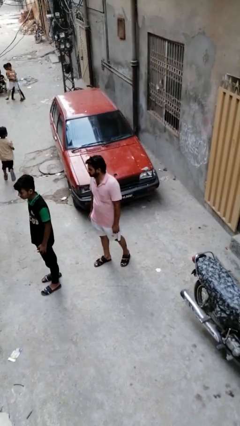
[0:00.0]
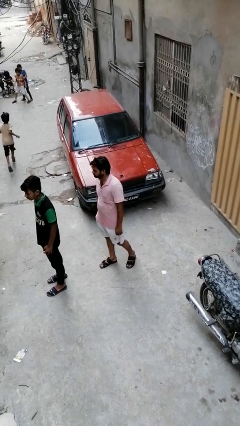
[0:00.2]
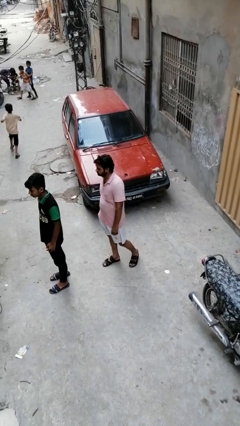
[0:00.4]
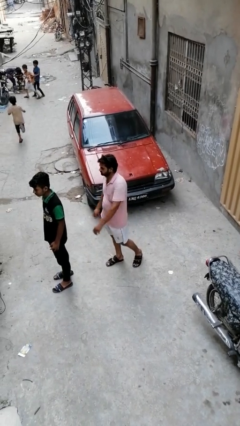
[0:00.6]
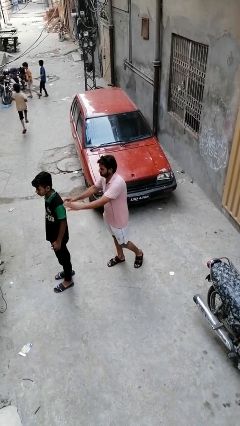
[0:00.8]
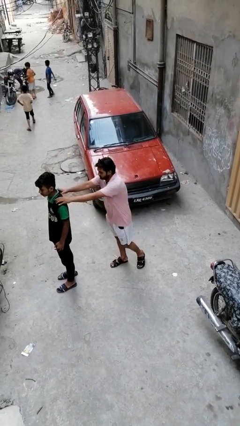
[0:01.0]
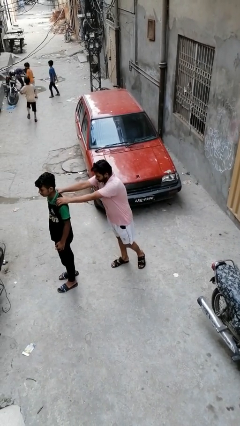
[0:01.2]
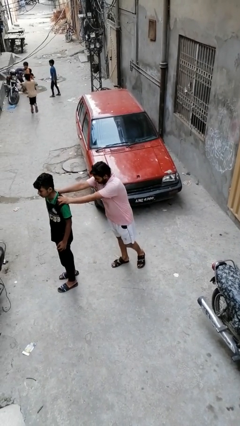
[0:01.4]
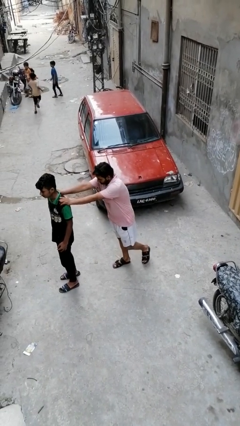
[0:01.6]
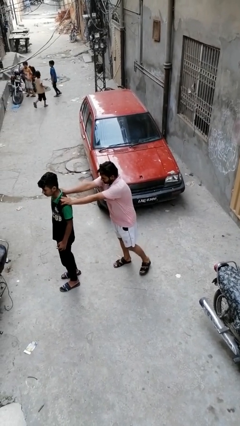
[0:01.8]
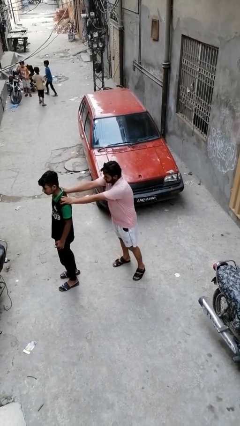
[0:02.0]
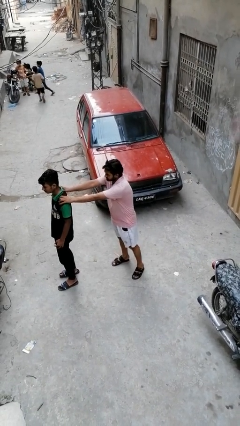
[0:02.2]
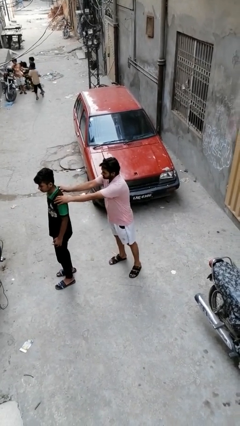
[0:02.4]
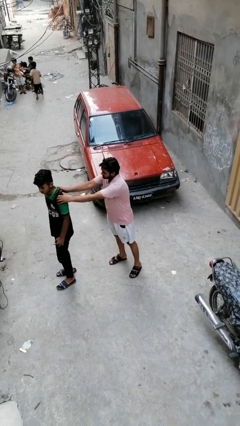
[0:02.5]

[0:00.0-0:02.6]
person grabs person by shoulder

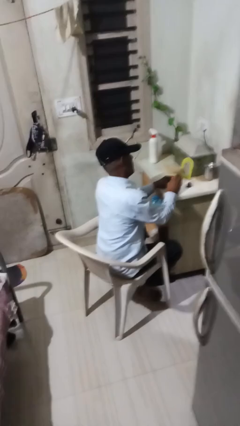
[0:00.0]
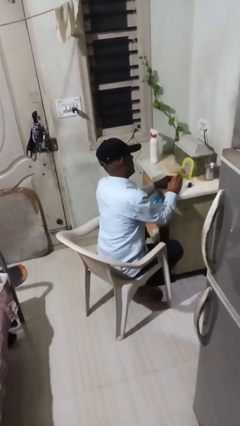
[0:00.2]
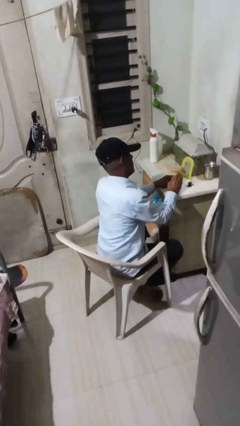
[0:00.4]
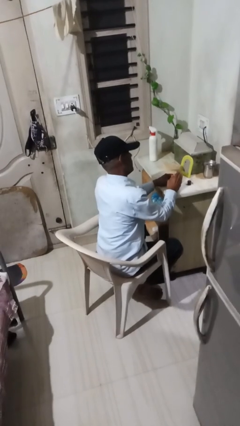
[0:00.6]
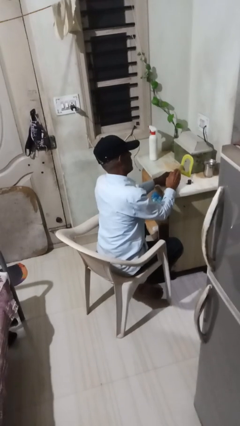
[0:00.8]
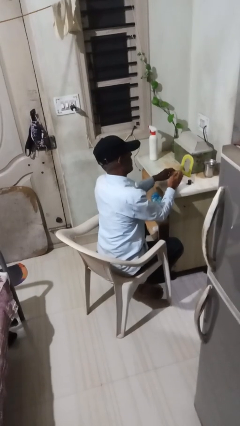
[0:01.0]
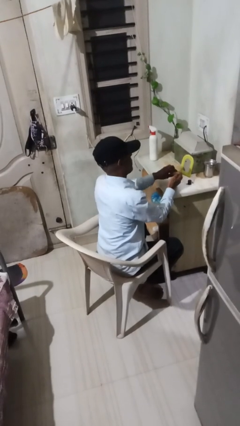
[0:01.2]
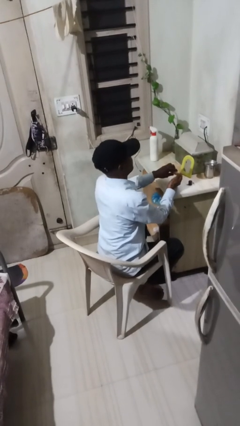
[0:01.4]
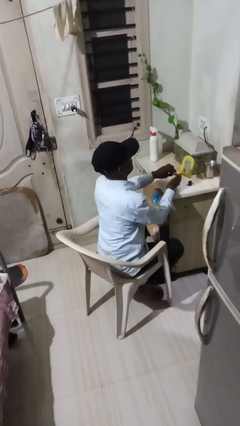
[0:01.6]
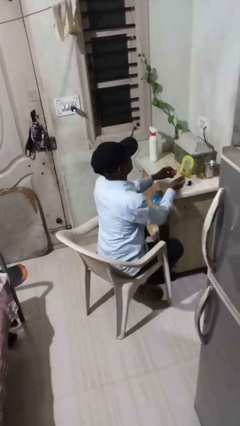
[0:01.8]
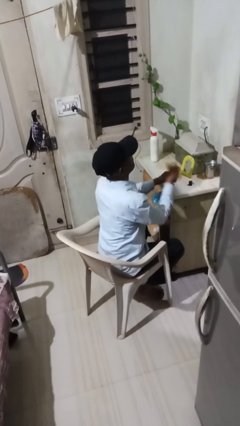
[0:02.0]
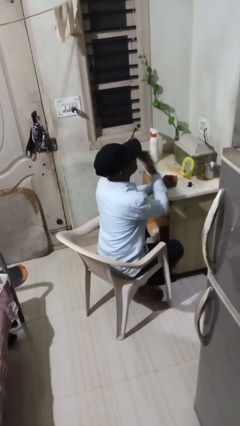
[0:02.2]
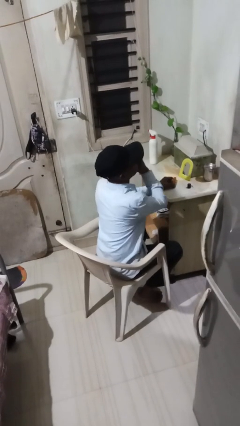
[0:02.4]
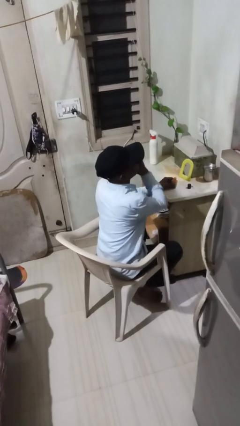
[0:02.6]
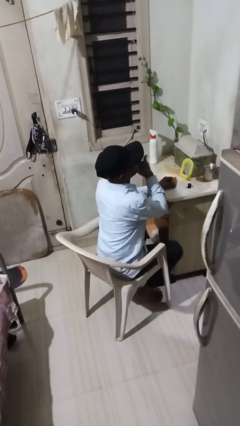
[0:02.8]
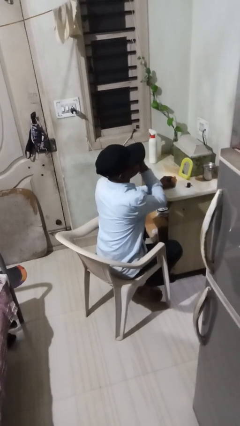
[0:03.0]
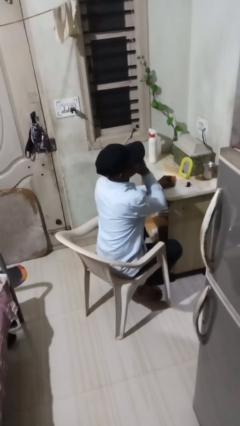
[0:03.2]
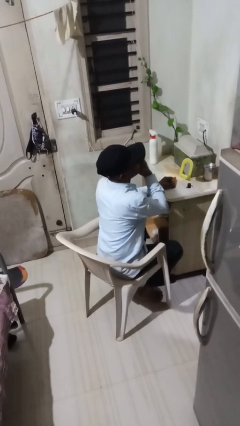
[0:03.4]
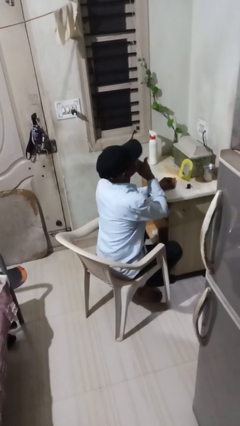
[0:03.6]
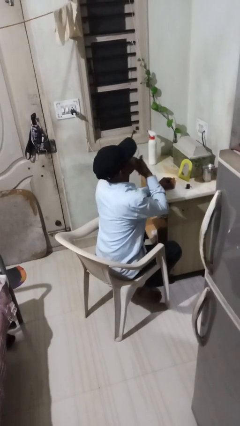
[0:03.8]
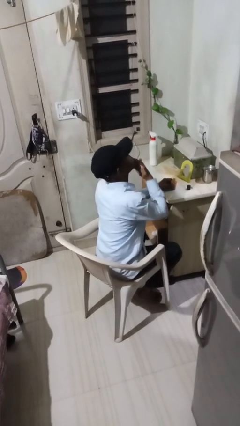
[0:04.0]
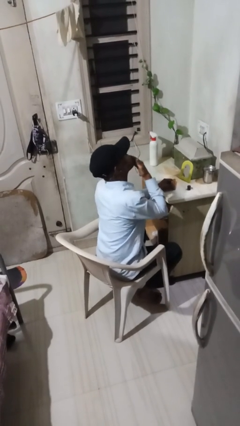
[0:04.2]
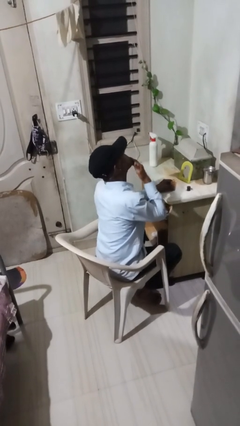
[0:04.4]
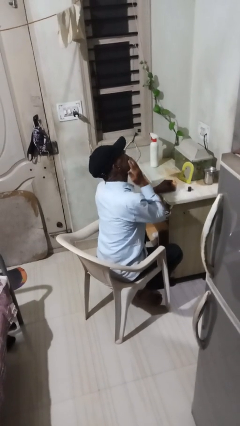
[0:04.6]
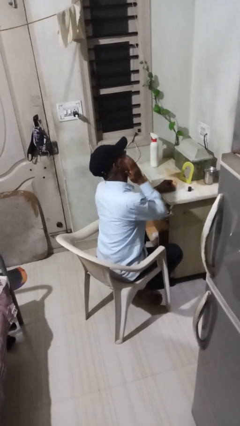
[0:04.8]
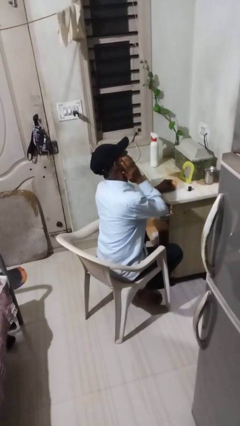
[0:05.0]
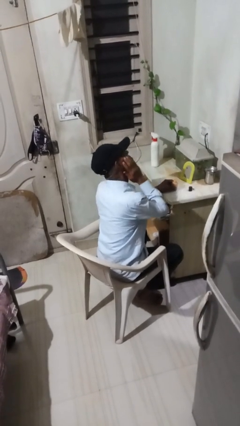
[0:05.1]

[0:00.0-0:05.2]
person applies foundation makeup

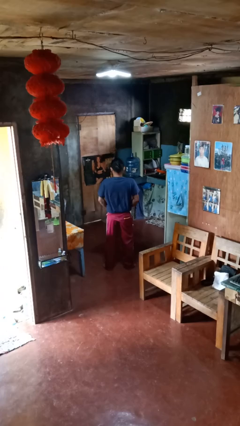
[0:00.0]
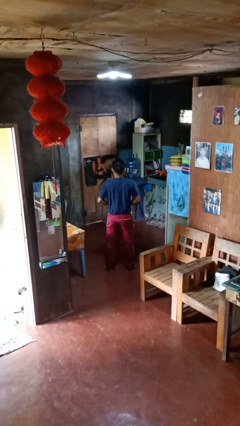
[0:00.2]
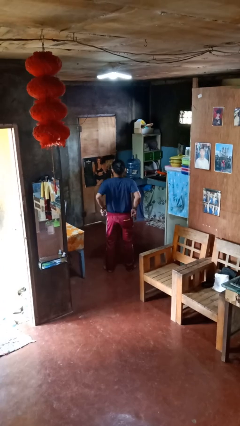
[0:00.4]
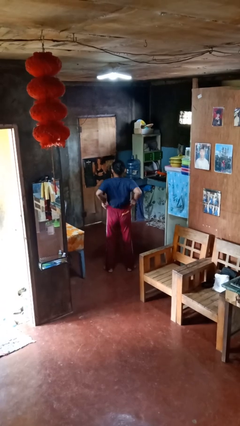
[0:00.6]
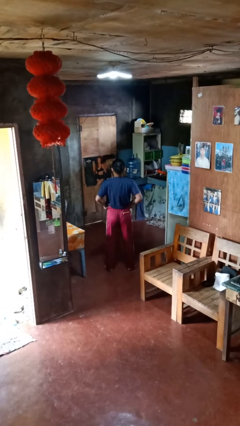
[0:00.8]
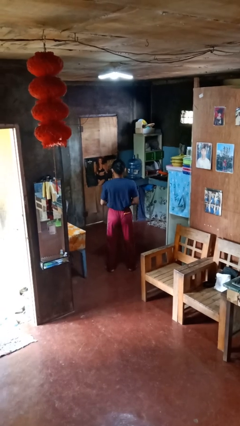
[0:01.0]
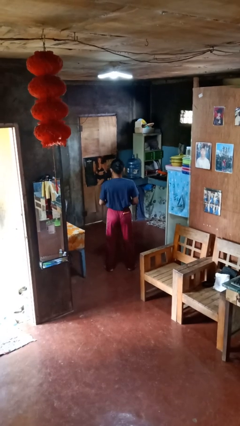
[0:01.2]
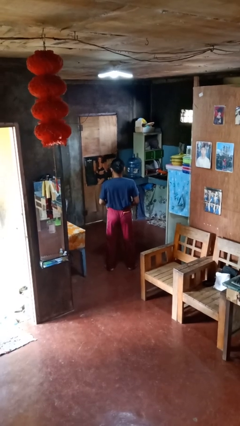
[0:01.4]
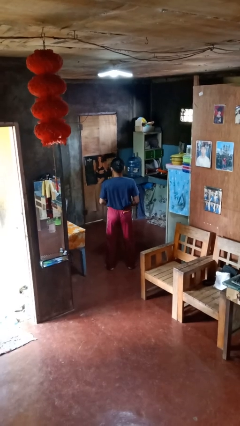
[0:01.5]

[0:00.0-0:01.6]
person hikes up pants

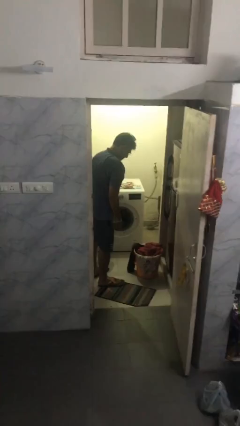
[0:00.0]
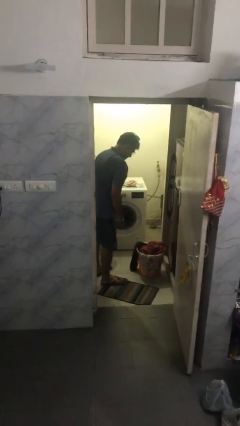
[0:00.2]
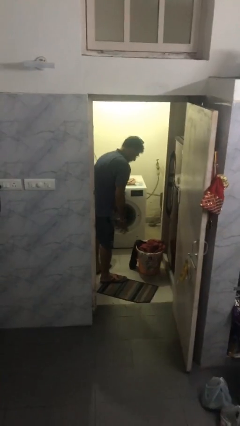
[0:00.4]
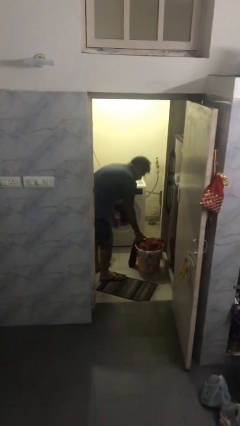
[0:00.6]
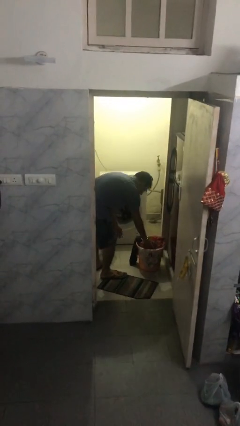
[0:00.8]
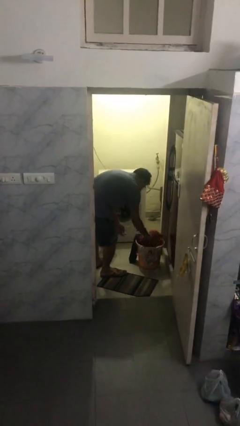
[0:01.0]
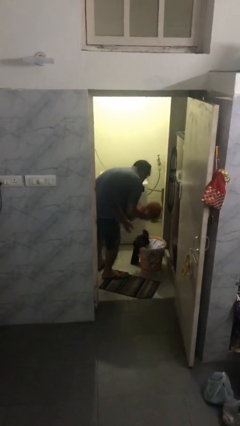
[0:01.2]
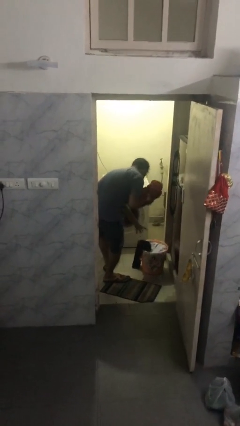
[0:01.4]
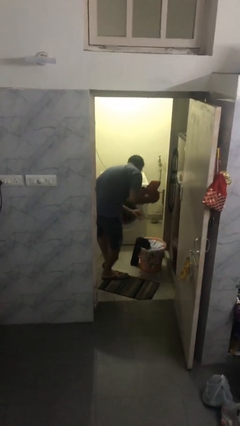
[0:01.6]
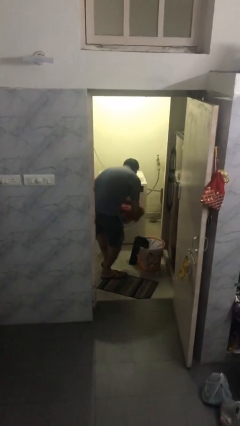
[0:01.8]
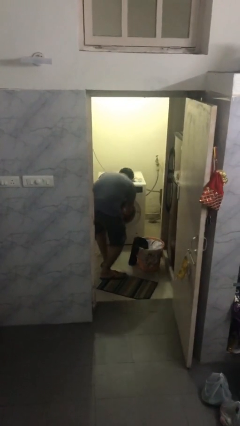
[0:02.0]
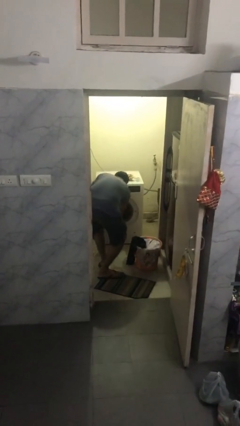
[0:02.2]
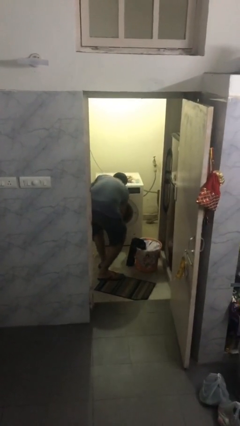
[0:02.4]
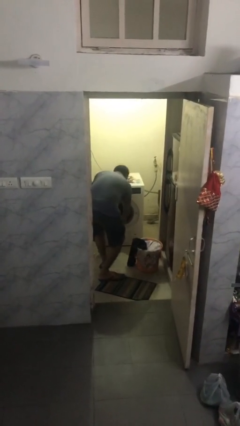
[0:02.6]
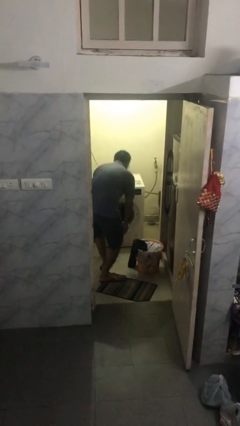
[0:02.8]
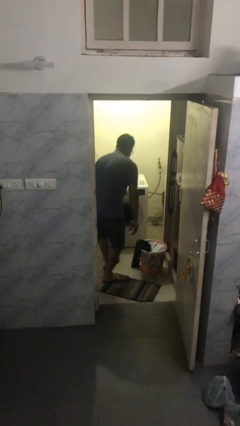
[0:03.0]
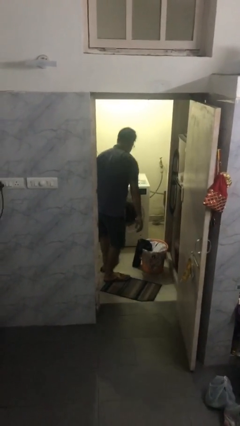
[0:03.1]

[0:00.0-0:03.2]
person loads dryer

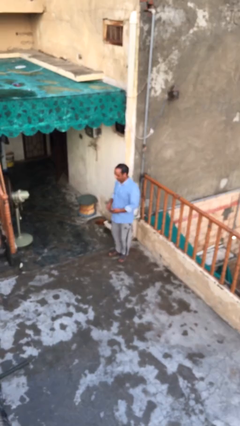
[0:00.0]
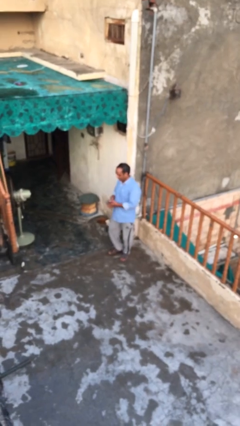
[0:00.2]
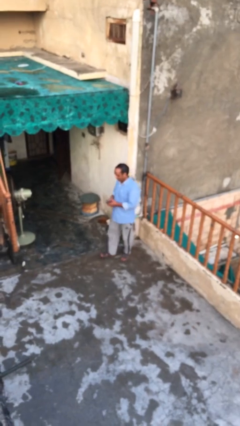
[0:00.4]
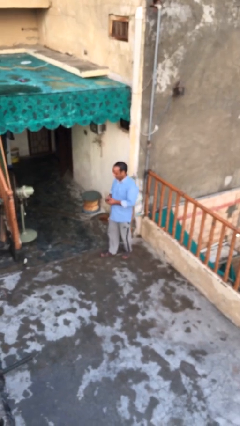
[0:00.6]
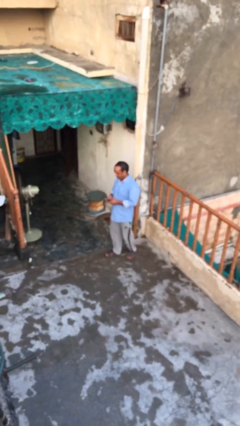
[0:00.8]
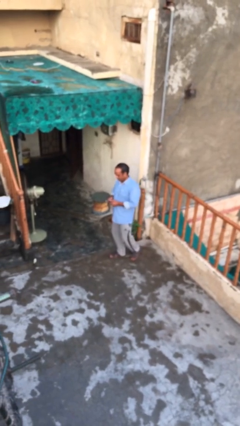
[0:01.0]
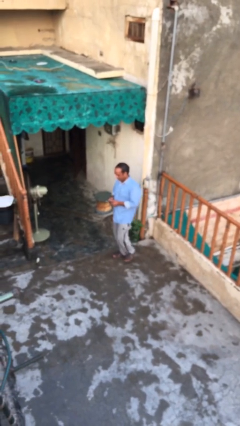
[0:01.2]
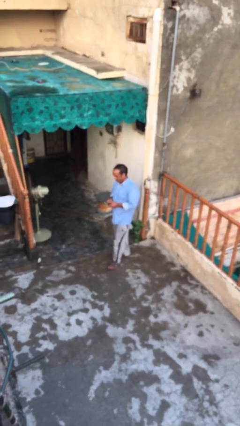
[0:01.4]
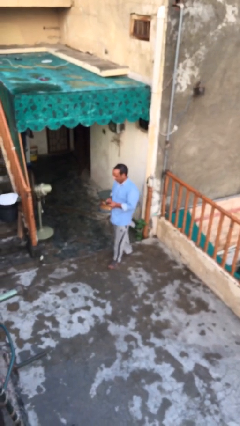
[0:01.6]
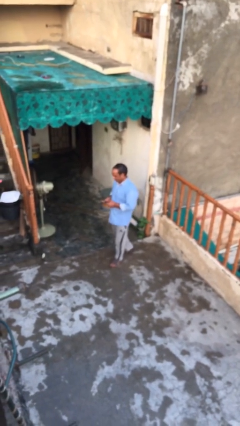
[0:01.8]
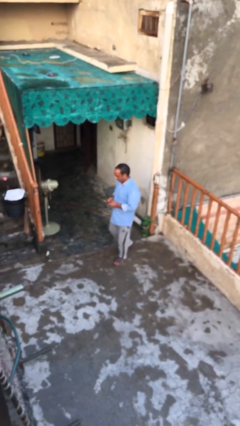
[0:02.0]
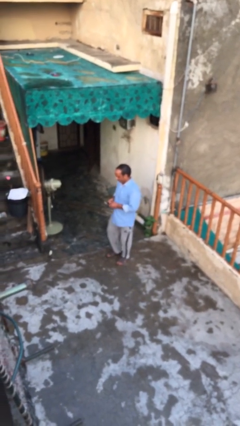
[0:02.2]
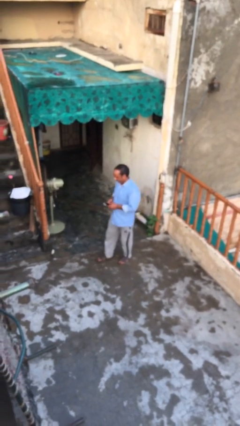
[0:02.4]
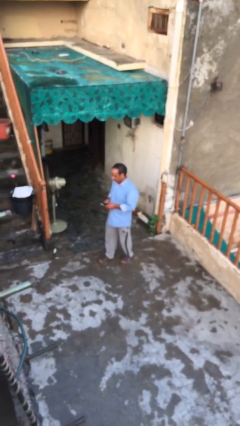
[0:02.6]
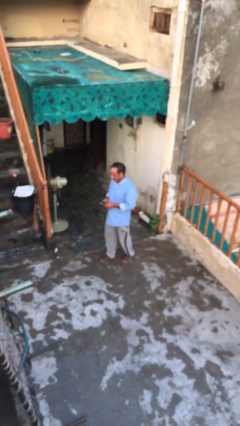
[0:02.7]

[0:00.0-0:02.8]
person texts on phone

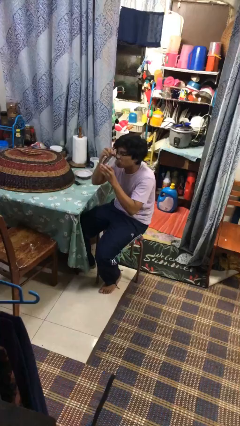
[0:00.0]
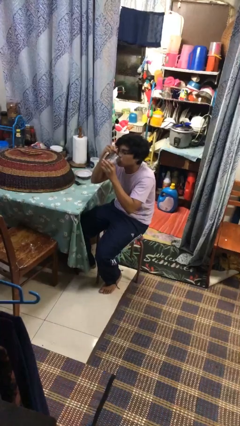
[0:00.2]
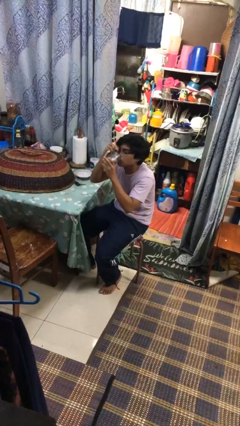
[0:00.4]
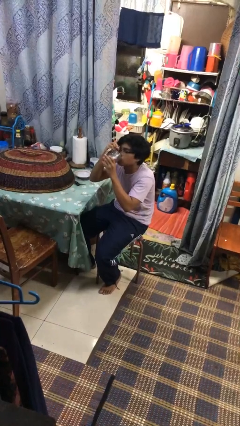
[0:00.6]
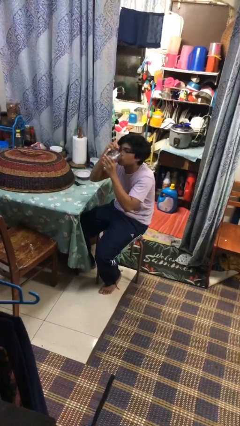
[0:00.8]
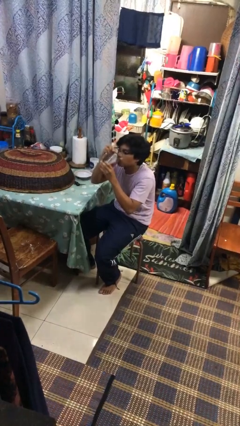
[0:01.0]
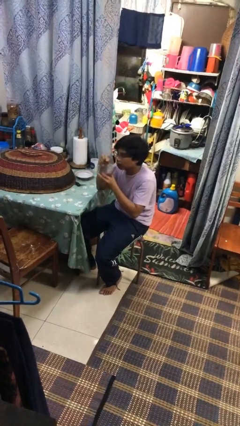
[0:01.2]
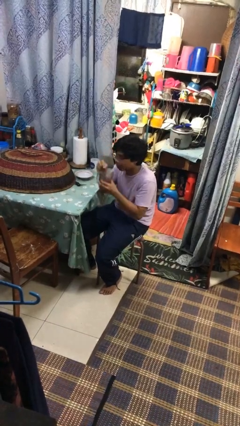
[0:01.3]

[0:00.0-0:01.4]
person drinks from mug

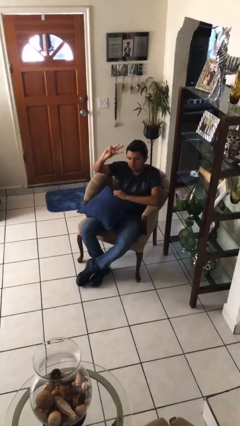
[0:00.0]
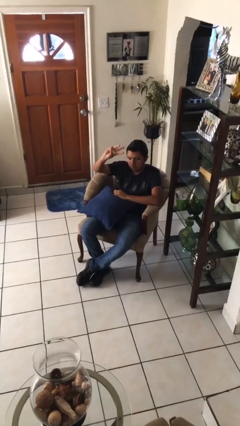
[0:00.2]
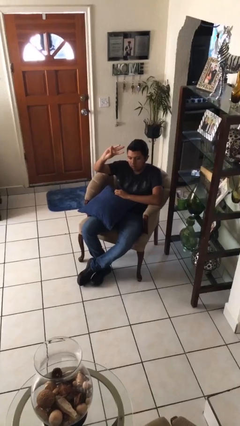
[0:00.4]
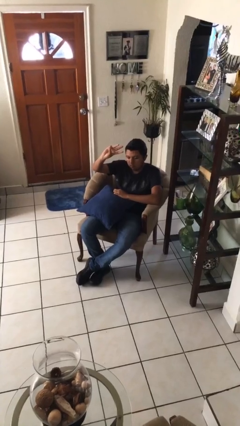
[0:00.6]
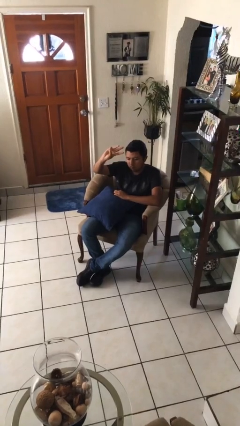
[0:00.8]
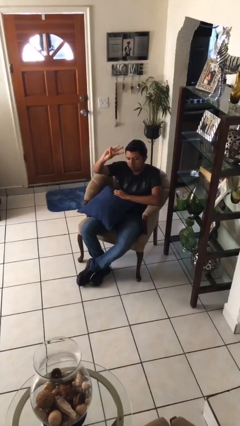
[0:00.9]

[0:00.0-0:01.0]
person gestures number three
